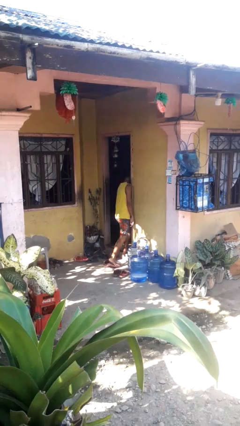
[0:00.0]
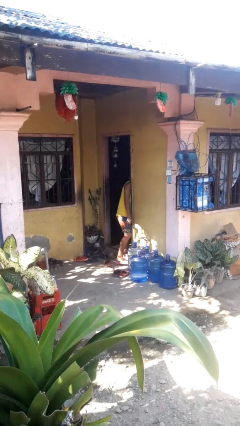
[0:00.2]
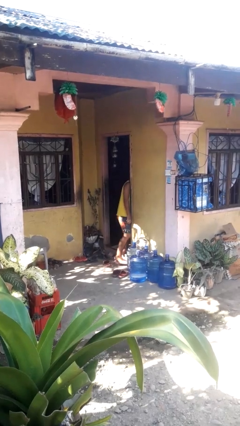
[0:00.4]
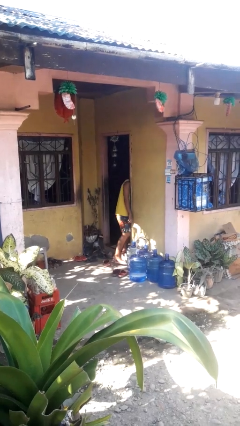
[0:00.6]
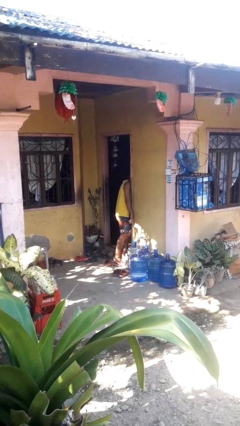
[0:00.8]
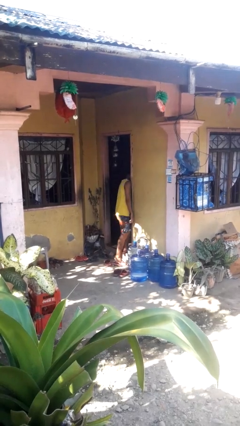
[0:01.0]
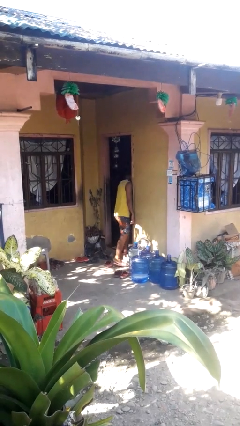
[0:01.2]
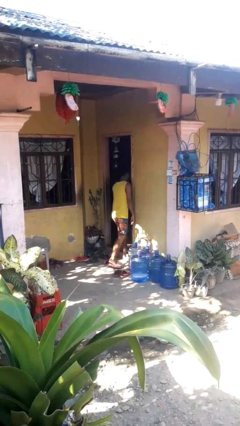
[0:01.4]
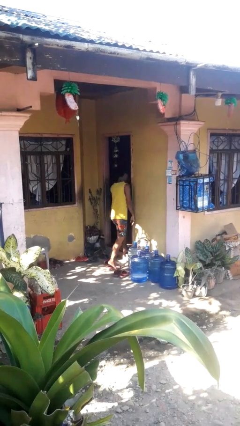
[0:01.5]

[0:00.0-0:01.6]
person bumps into wall

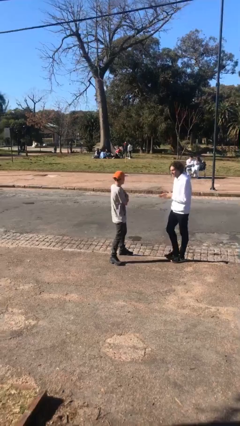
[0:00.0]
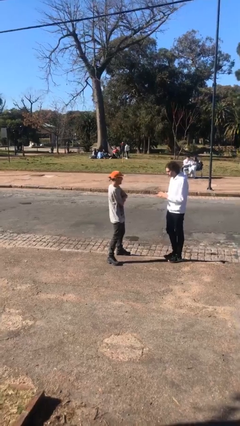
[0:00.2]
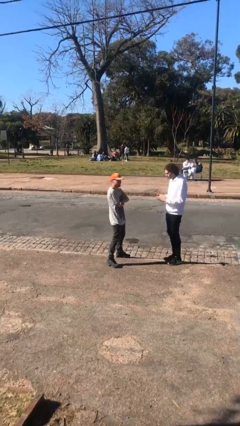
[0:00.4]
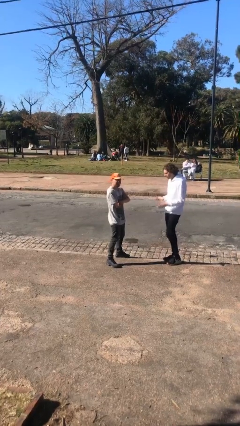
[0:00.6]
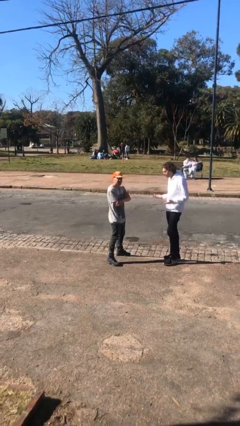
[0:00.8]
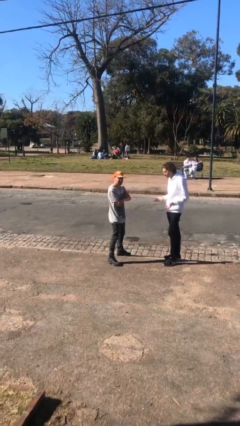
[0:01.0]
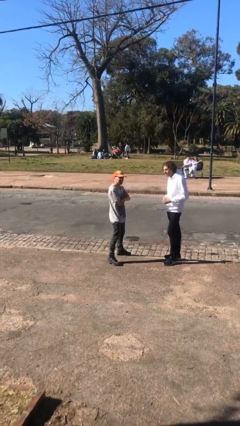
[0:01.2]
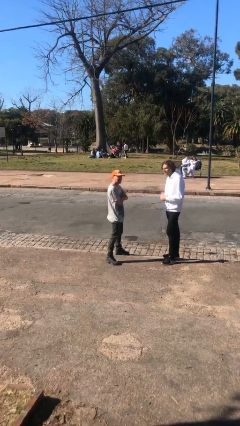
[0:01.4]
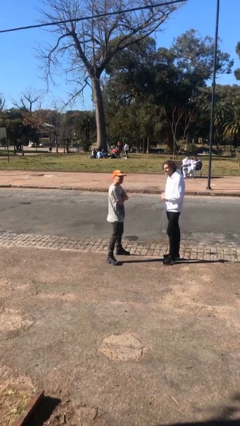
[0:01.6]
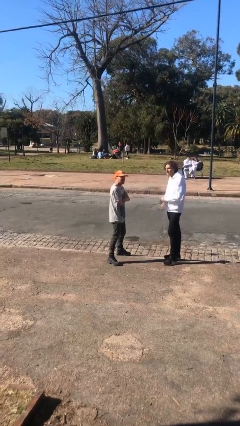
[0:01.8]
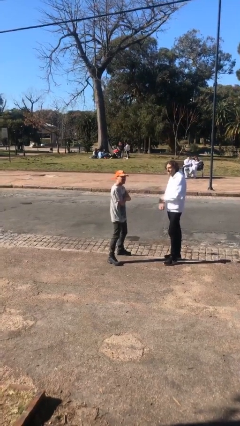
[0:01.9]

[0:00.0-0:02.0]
person talks to person

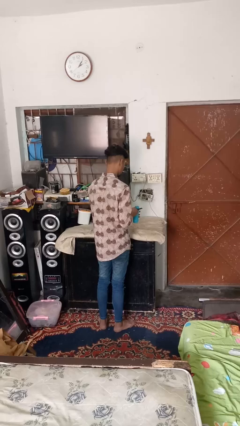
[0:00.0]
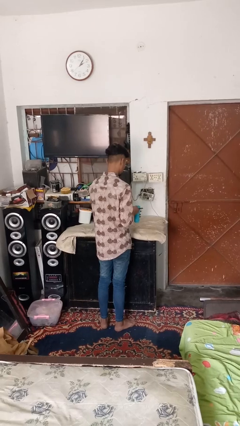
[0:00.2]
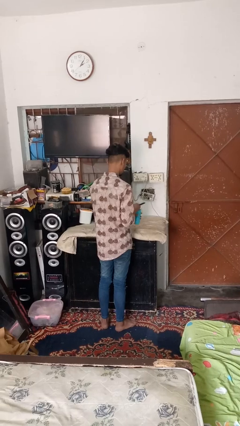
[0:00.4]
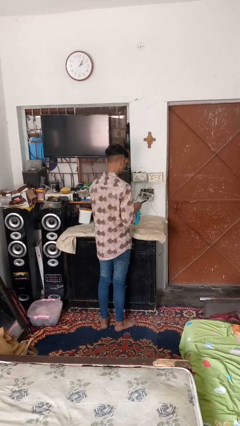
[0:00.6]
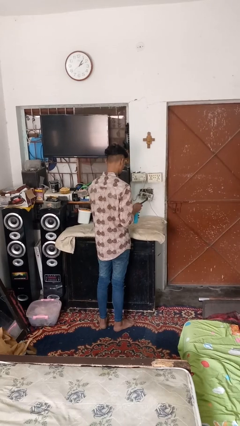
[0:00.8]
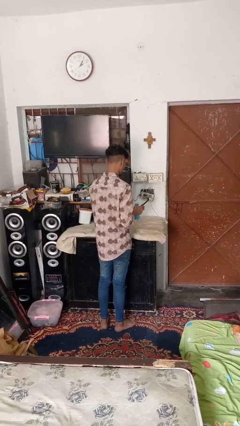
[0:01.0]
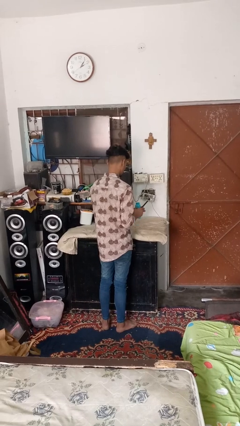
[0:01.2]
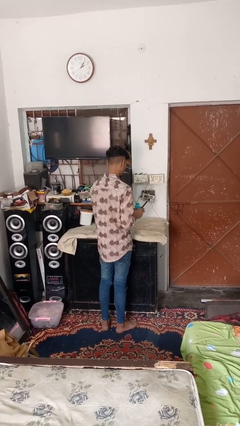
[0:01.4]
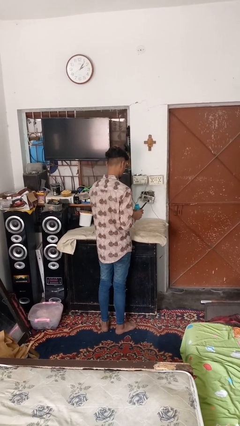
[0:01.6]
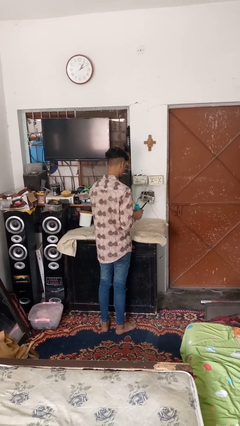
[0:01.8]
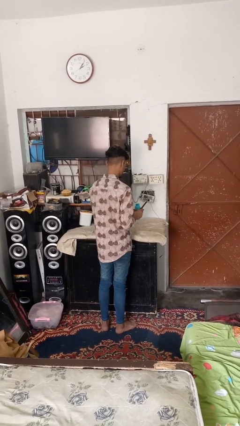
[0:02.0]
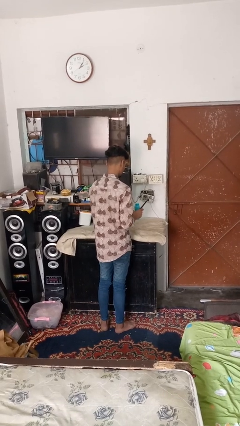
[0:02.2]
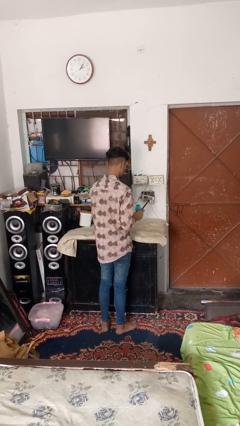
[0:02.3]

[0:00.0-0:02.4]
person opens can with can opener

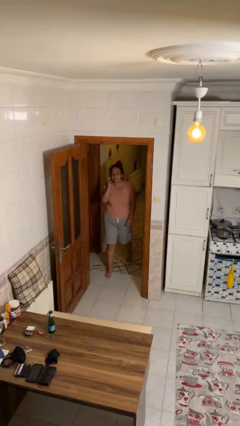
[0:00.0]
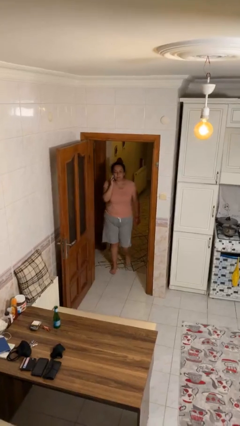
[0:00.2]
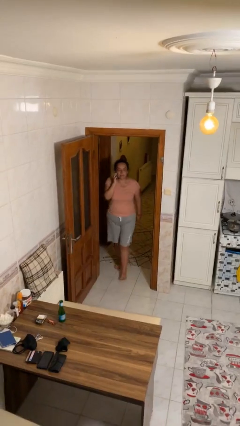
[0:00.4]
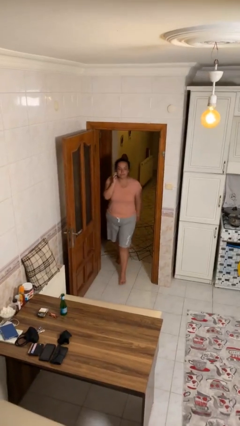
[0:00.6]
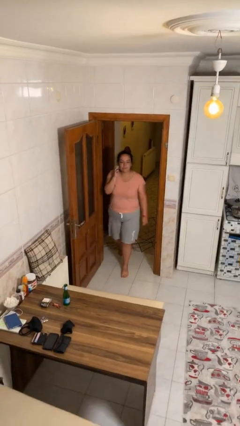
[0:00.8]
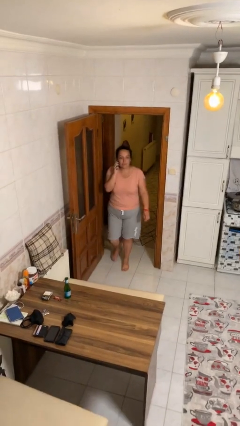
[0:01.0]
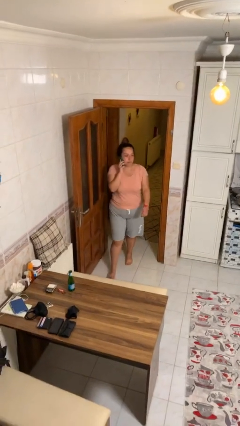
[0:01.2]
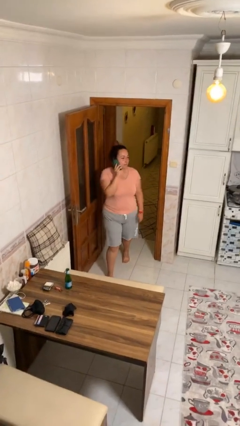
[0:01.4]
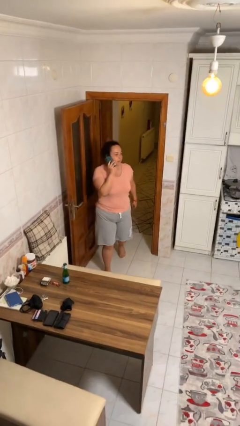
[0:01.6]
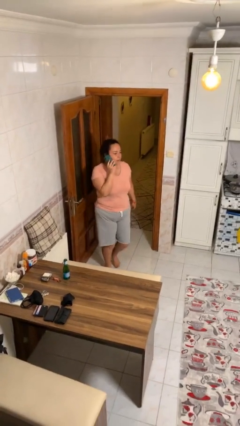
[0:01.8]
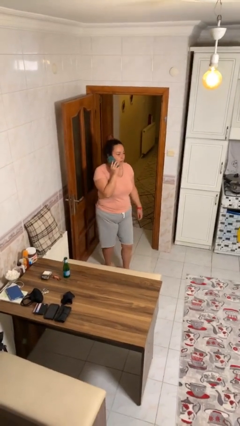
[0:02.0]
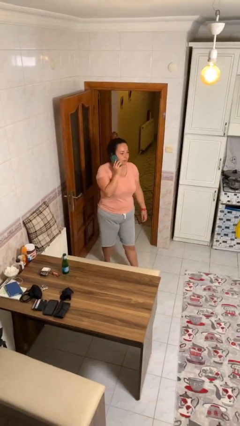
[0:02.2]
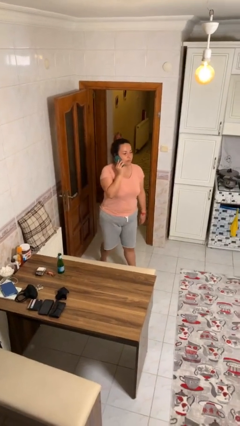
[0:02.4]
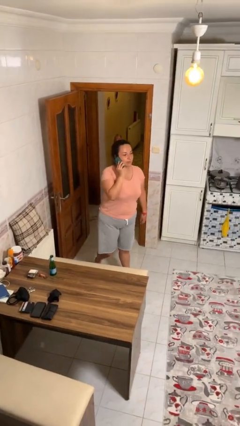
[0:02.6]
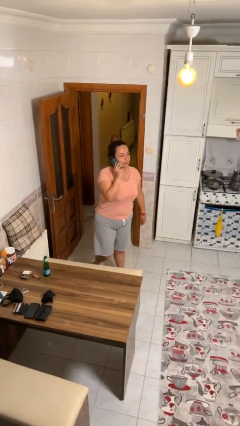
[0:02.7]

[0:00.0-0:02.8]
person enters scene through structure

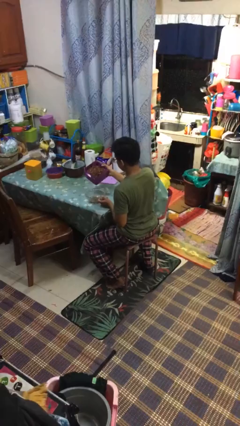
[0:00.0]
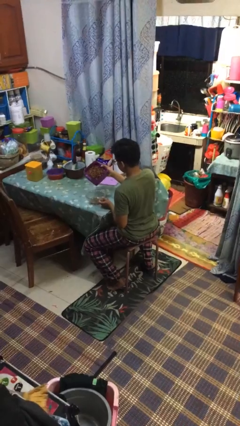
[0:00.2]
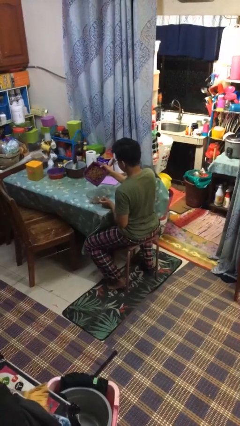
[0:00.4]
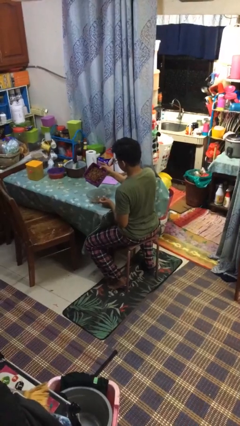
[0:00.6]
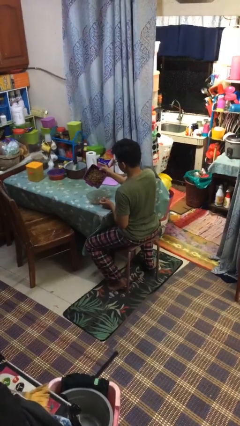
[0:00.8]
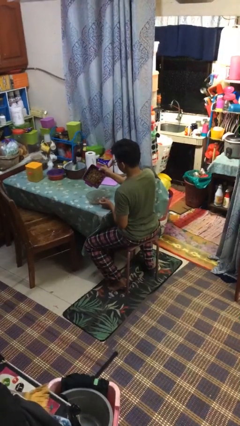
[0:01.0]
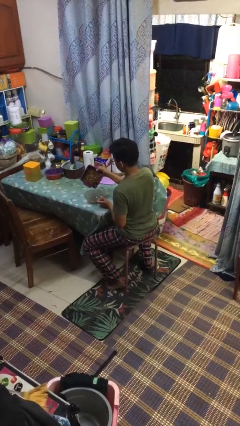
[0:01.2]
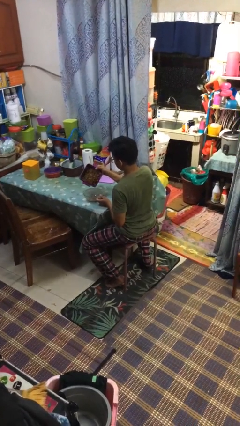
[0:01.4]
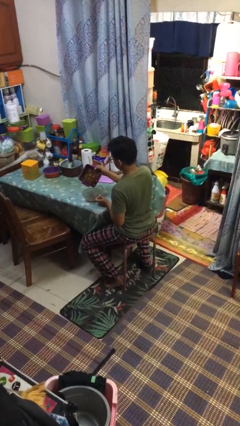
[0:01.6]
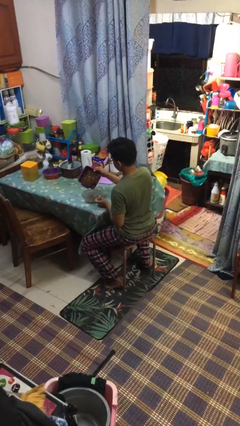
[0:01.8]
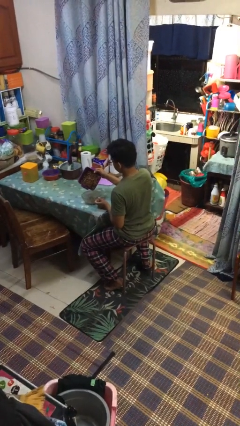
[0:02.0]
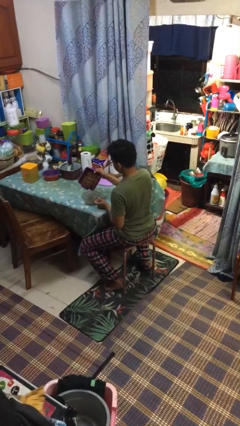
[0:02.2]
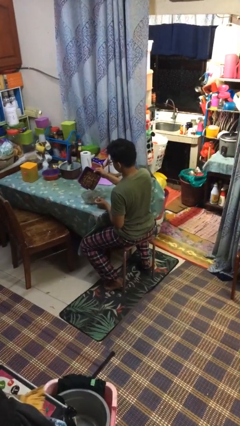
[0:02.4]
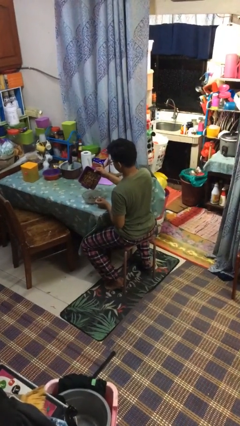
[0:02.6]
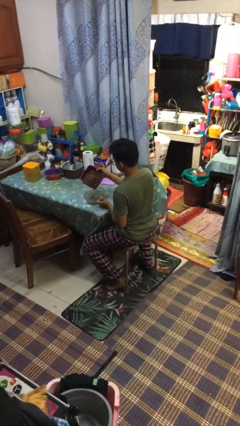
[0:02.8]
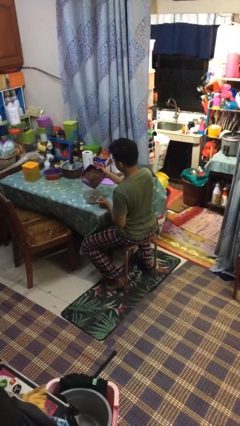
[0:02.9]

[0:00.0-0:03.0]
person pours into bowl

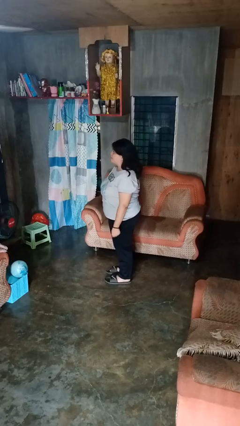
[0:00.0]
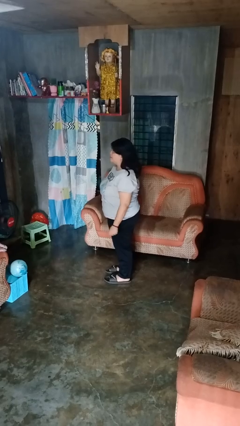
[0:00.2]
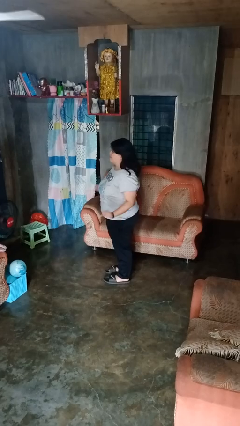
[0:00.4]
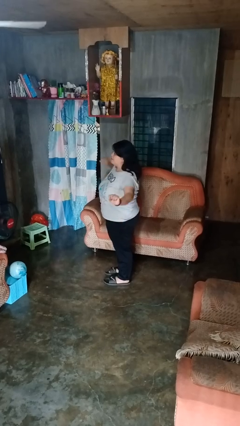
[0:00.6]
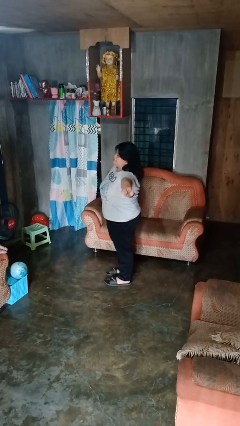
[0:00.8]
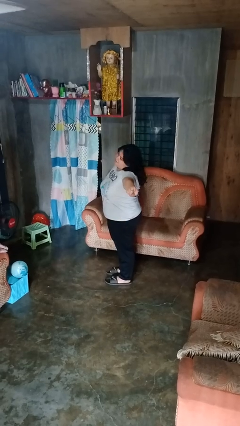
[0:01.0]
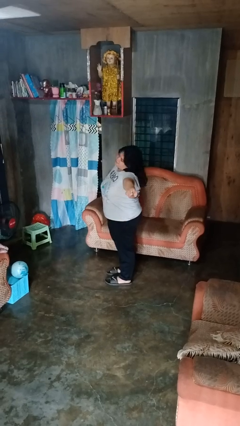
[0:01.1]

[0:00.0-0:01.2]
person stretches arms to side

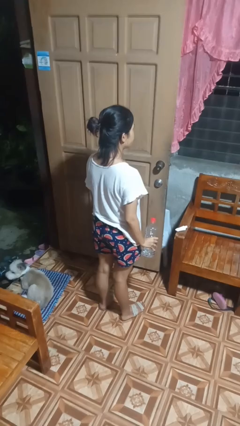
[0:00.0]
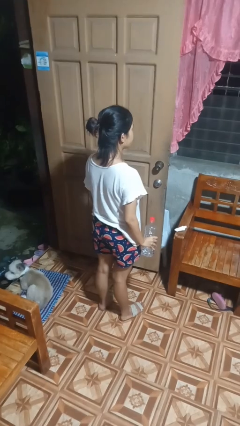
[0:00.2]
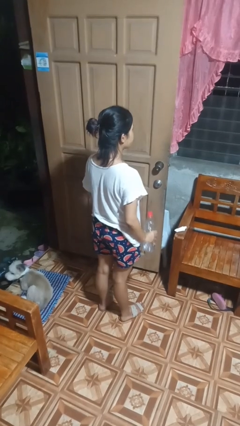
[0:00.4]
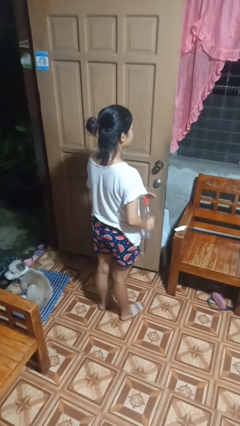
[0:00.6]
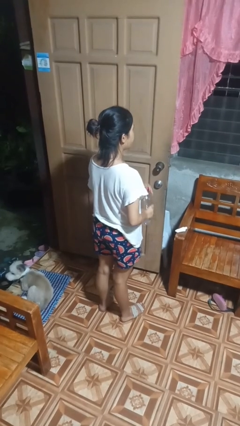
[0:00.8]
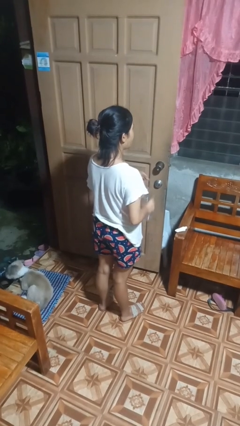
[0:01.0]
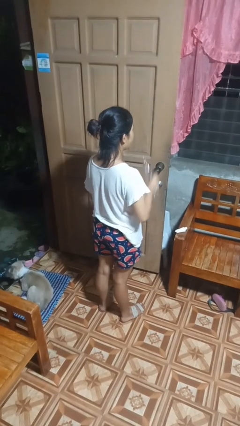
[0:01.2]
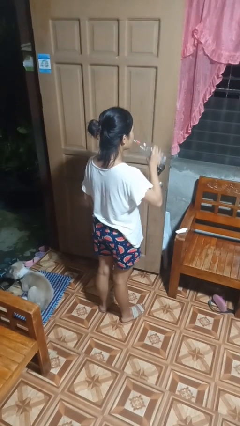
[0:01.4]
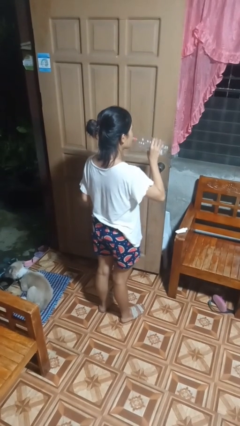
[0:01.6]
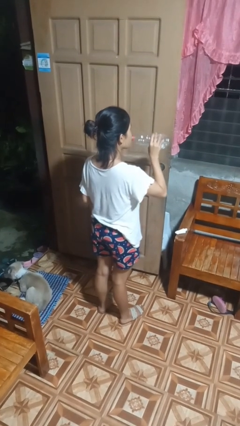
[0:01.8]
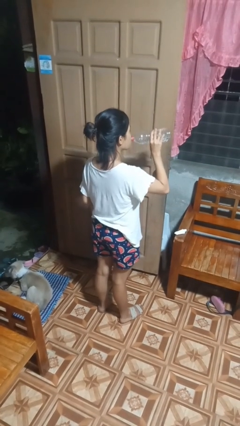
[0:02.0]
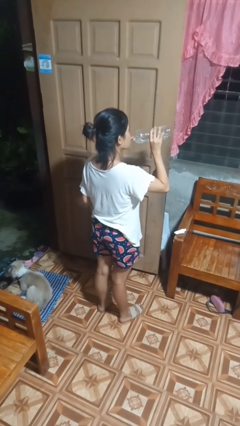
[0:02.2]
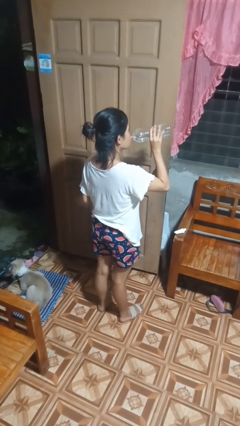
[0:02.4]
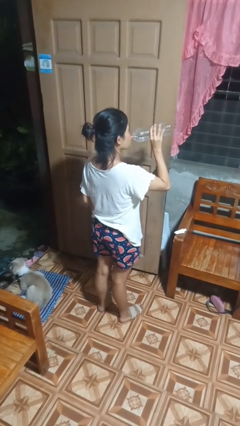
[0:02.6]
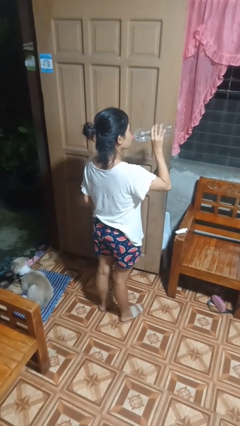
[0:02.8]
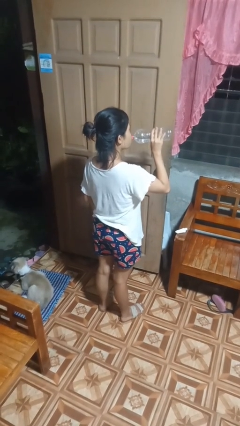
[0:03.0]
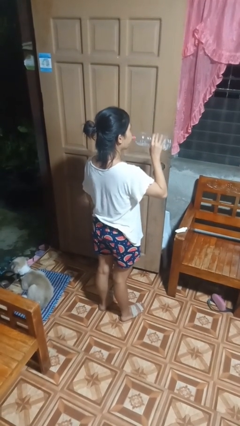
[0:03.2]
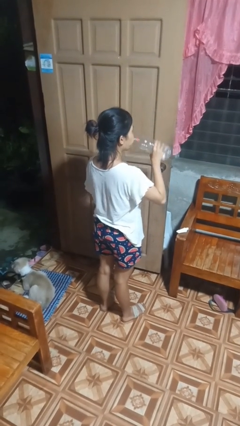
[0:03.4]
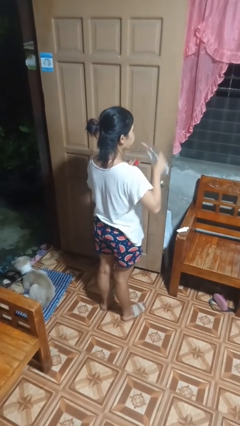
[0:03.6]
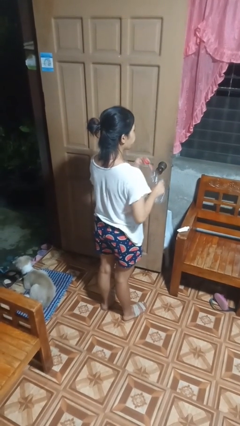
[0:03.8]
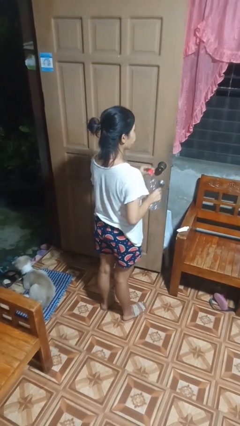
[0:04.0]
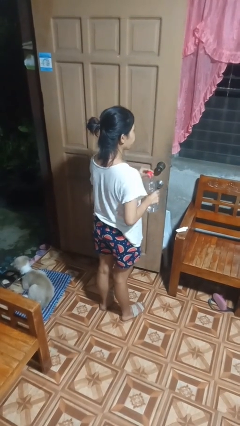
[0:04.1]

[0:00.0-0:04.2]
person drinks from bottle

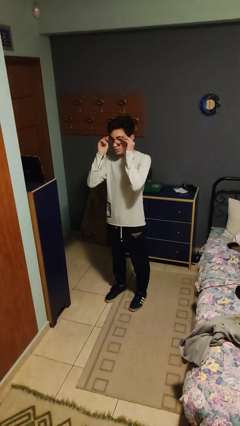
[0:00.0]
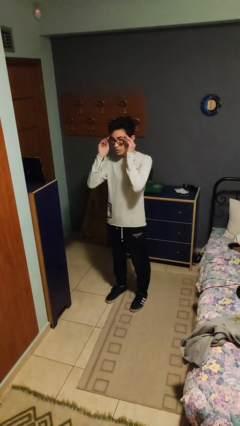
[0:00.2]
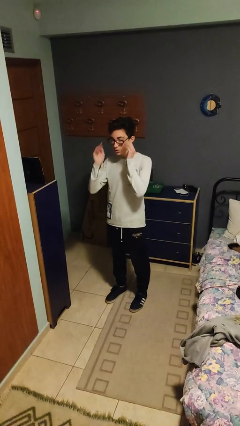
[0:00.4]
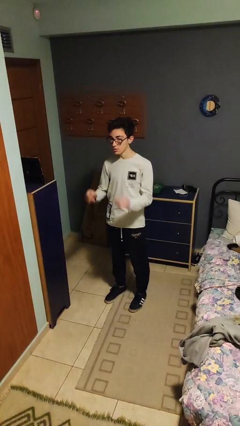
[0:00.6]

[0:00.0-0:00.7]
person puts on glasses
